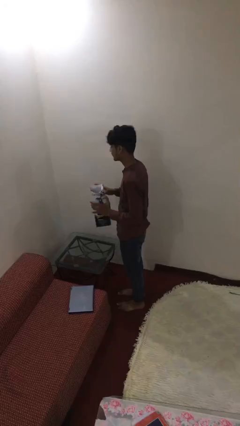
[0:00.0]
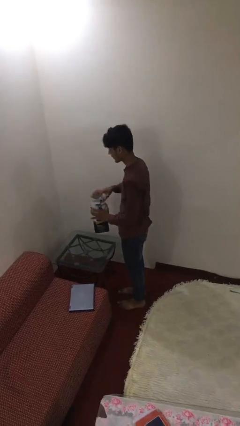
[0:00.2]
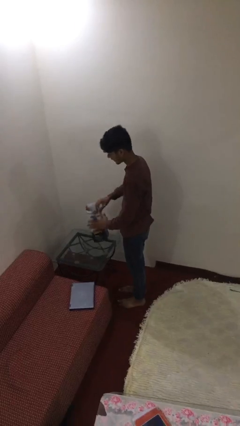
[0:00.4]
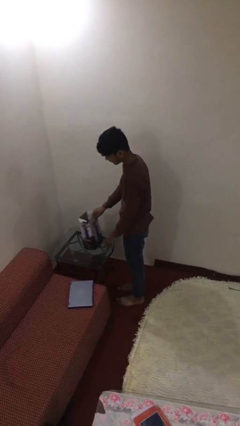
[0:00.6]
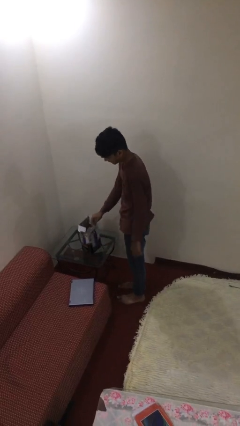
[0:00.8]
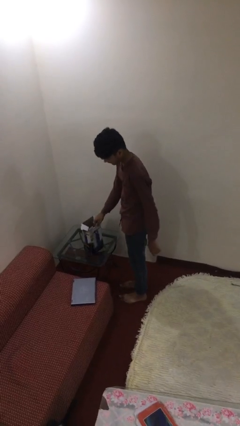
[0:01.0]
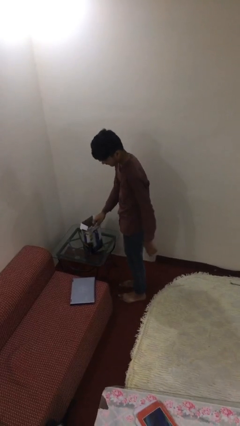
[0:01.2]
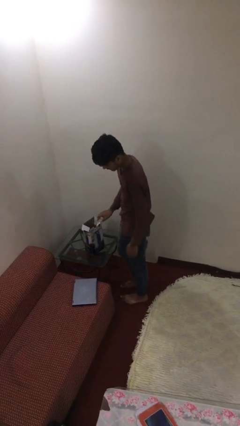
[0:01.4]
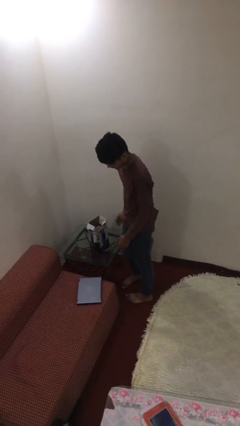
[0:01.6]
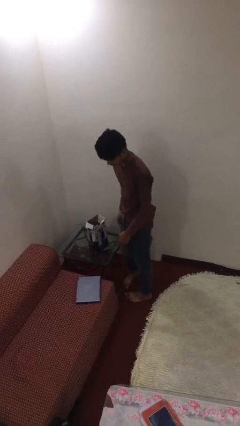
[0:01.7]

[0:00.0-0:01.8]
person puts down object on table

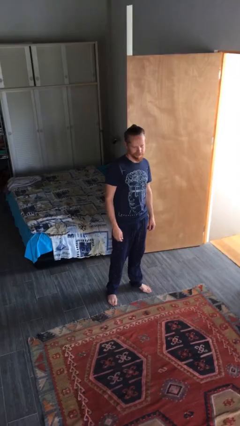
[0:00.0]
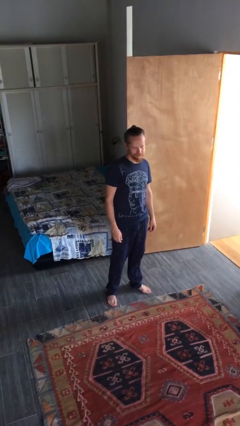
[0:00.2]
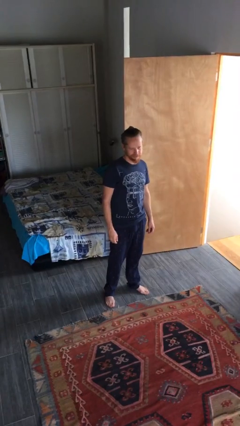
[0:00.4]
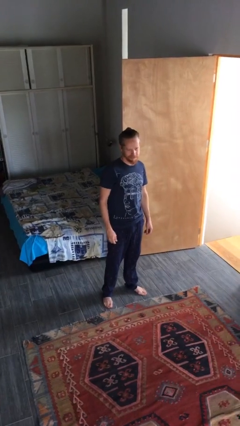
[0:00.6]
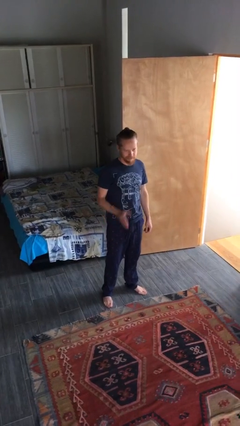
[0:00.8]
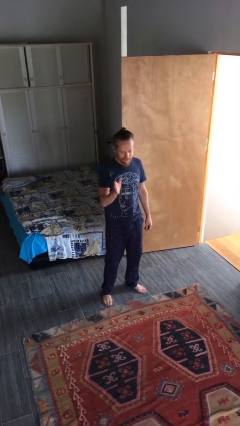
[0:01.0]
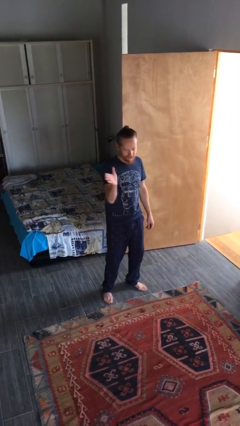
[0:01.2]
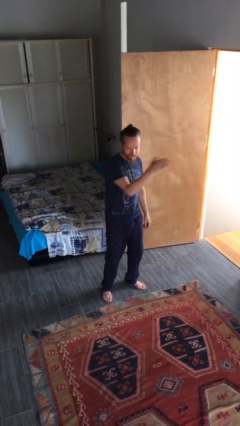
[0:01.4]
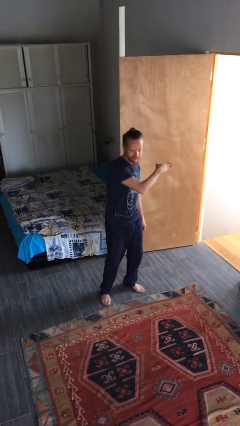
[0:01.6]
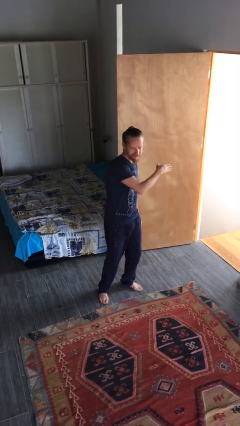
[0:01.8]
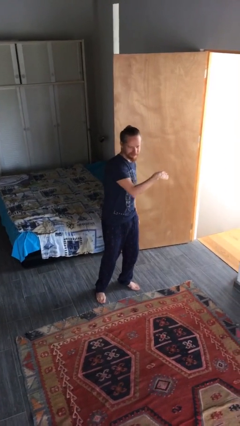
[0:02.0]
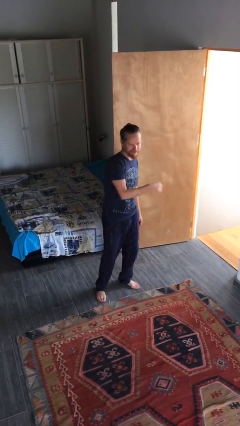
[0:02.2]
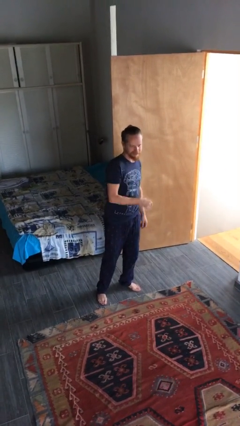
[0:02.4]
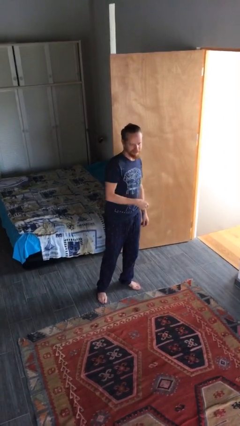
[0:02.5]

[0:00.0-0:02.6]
person gestures swipe left

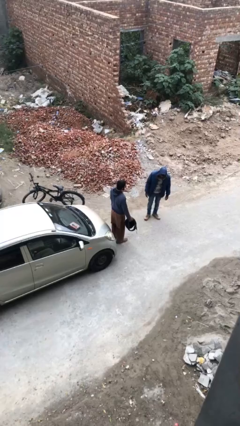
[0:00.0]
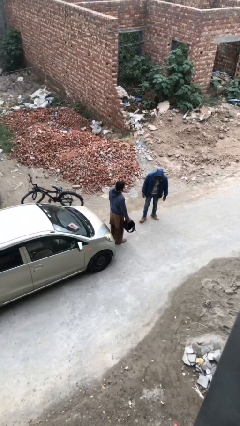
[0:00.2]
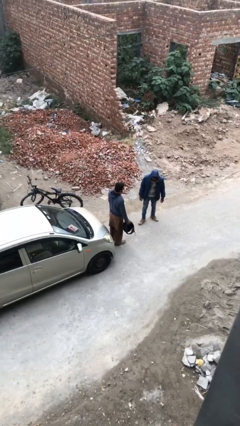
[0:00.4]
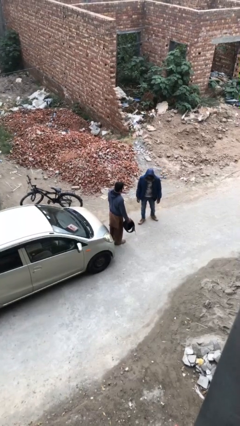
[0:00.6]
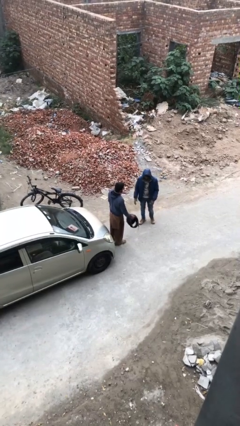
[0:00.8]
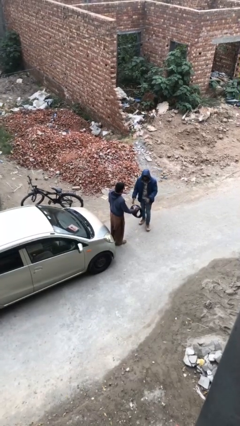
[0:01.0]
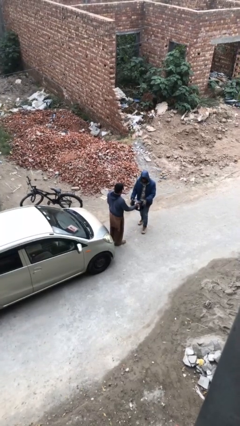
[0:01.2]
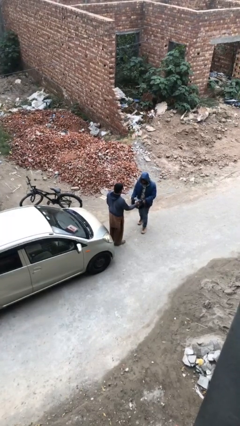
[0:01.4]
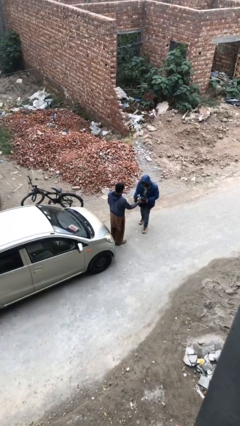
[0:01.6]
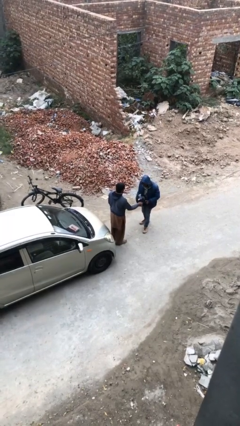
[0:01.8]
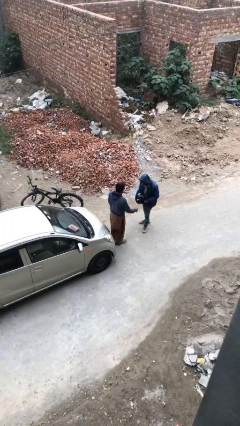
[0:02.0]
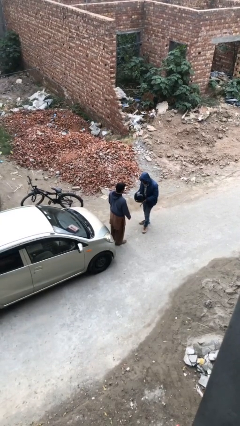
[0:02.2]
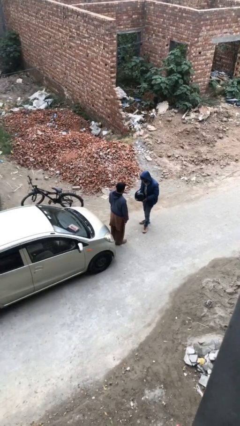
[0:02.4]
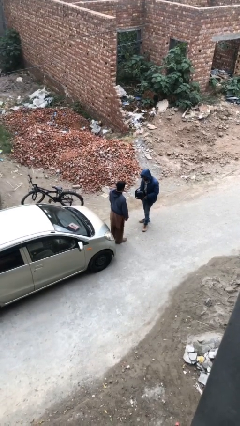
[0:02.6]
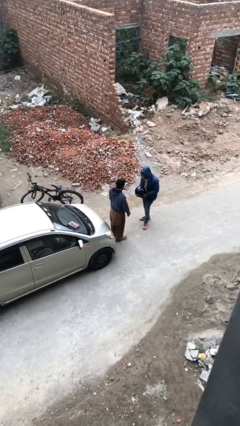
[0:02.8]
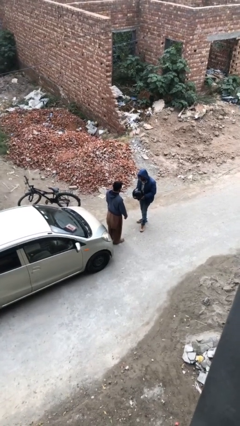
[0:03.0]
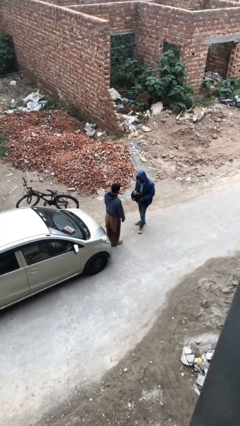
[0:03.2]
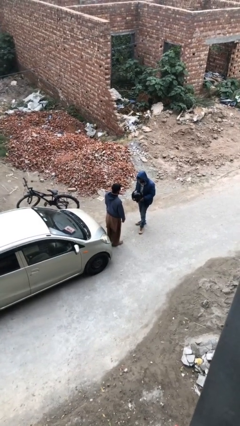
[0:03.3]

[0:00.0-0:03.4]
person transfers object to person

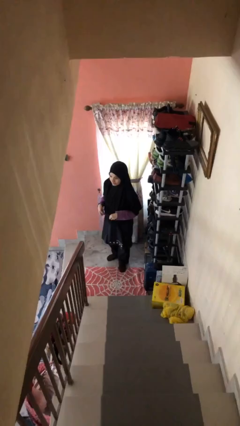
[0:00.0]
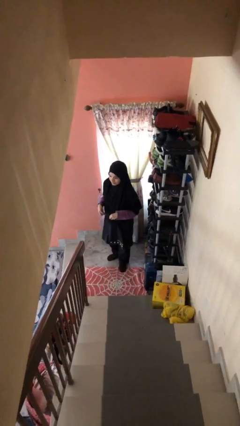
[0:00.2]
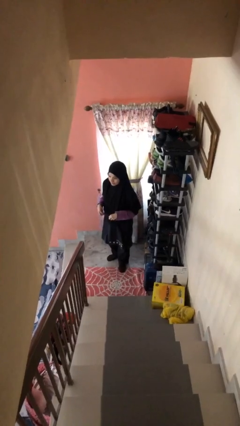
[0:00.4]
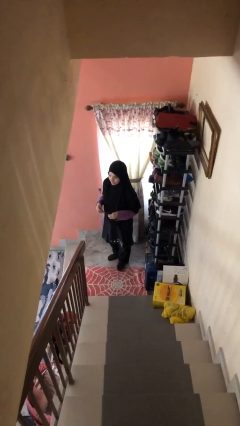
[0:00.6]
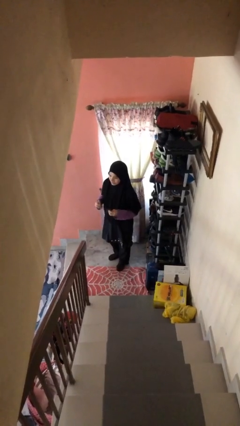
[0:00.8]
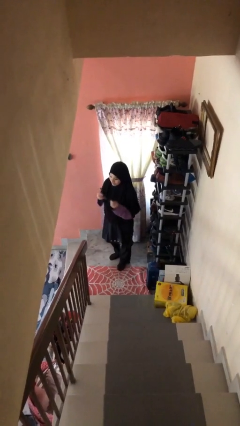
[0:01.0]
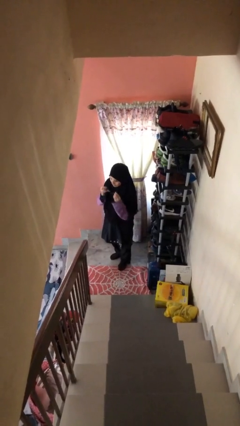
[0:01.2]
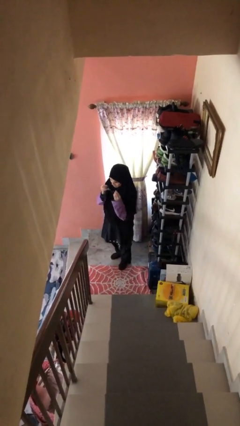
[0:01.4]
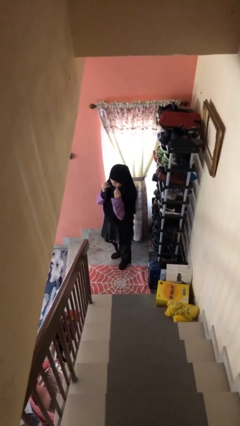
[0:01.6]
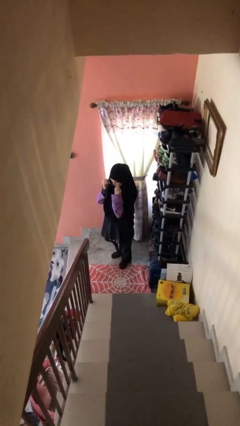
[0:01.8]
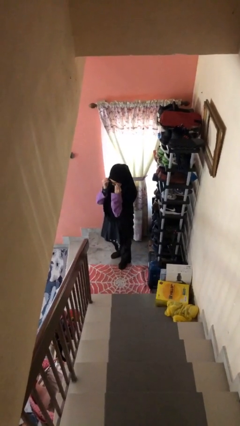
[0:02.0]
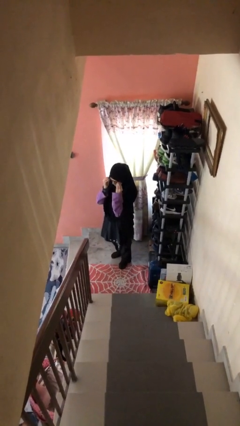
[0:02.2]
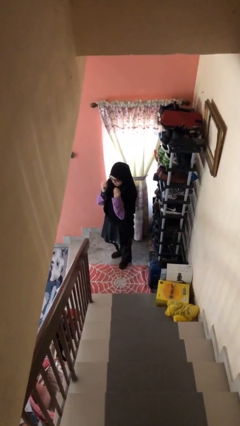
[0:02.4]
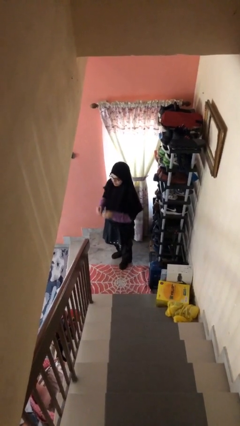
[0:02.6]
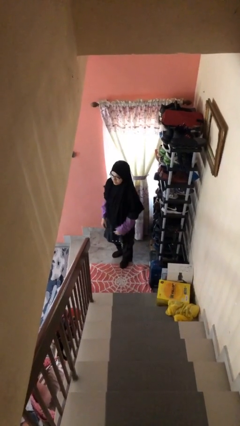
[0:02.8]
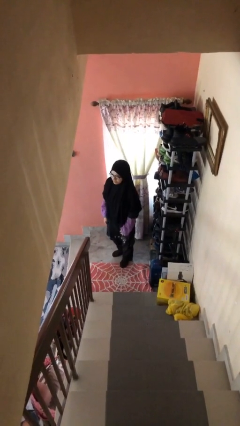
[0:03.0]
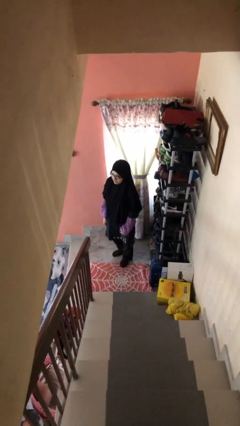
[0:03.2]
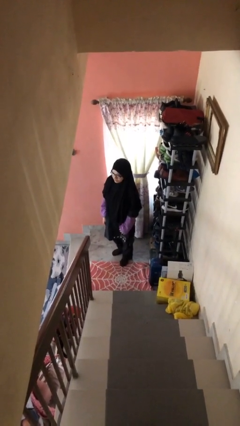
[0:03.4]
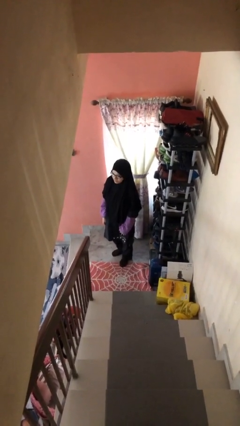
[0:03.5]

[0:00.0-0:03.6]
person puts on glasses

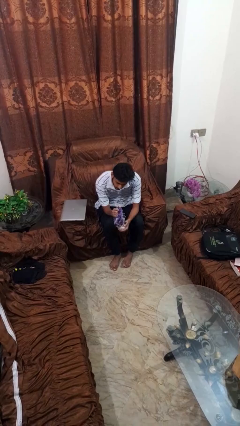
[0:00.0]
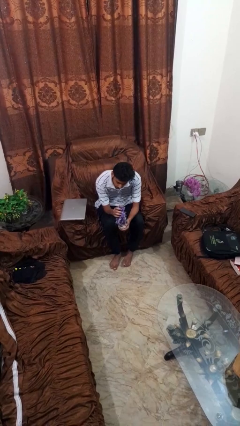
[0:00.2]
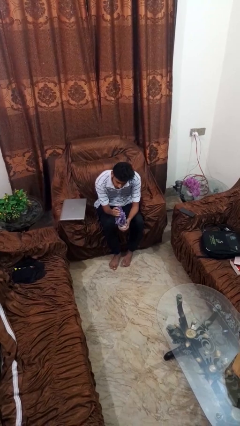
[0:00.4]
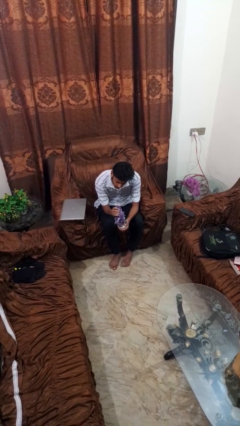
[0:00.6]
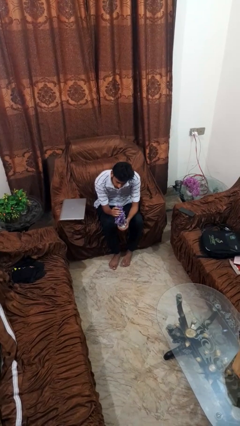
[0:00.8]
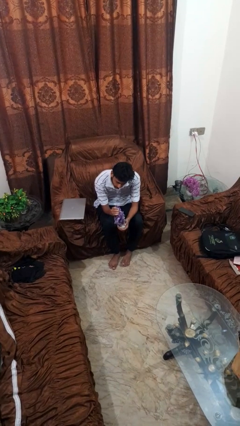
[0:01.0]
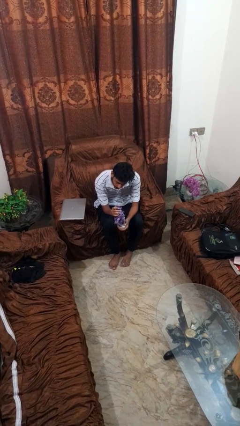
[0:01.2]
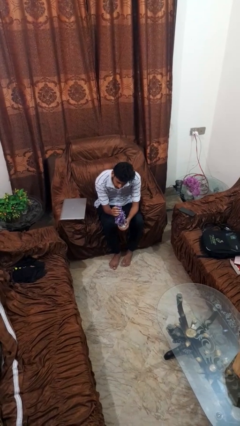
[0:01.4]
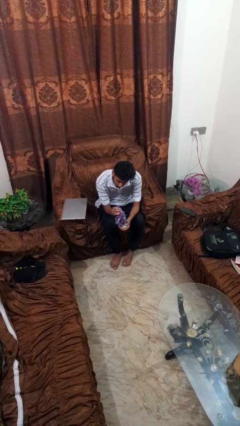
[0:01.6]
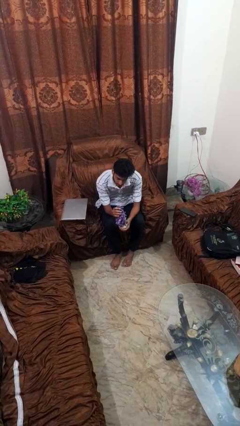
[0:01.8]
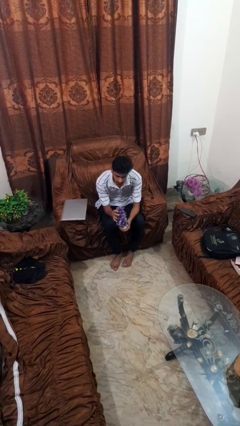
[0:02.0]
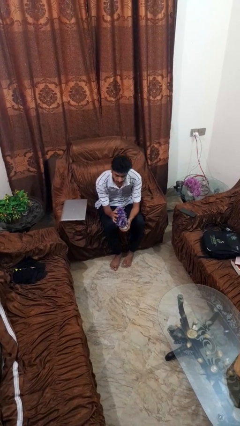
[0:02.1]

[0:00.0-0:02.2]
person squeezes object

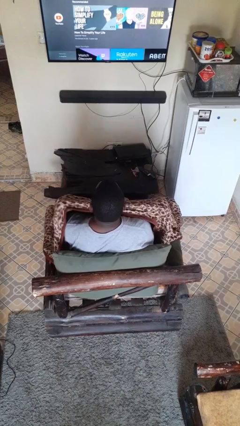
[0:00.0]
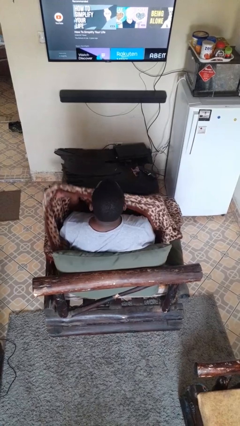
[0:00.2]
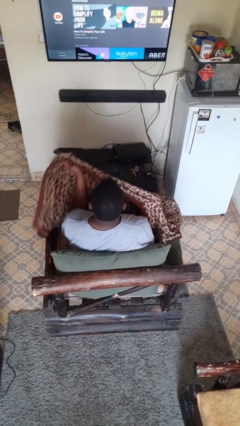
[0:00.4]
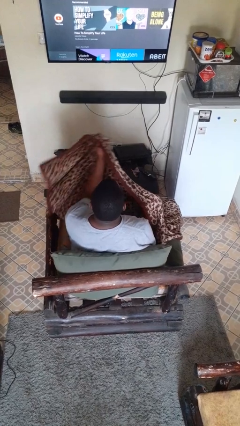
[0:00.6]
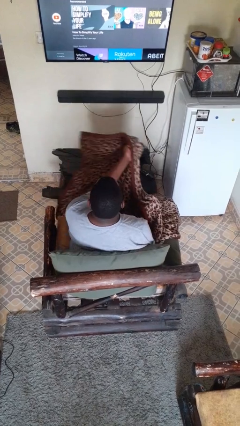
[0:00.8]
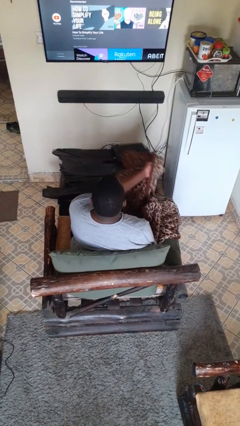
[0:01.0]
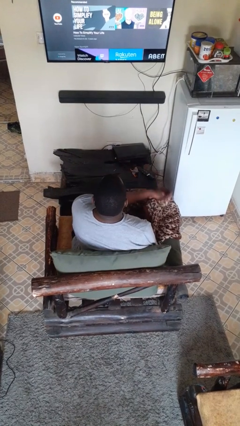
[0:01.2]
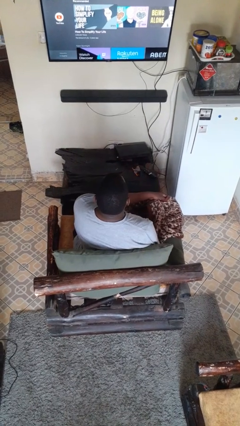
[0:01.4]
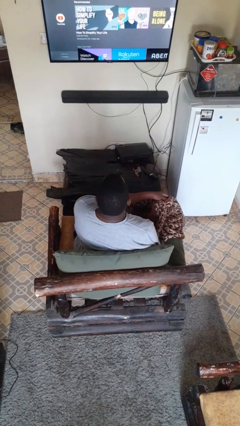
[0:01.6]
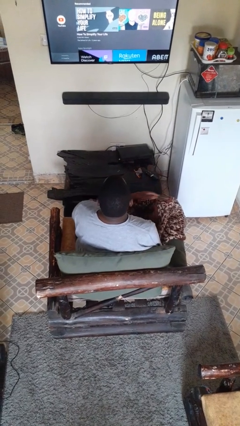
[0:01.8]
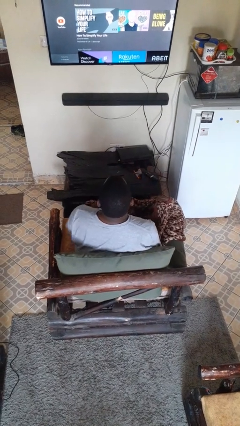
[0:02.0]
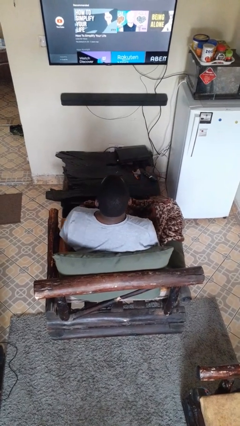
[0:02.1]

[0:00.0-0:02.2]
person uncovers with blanket

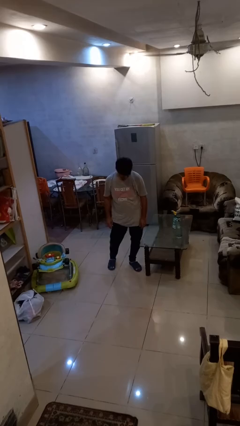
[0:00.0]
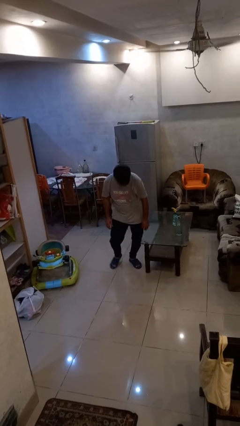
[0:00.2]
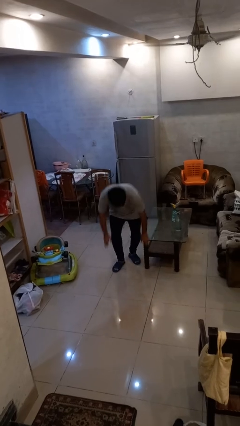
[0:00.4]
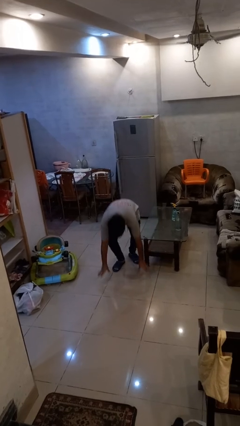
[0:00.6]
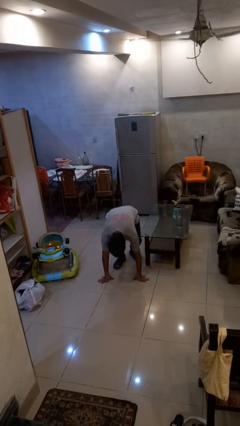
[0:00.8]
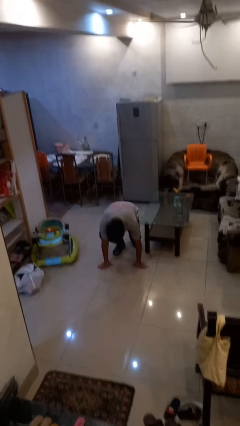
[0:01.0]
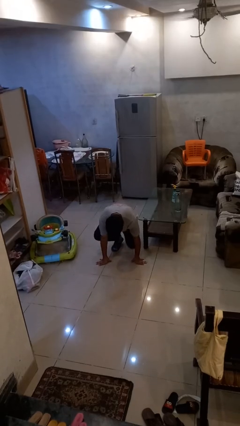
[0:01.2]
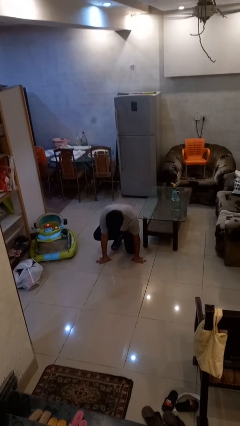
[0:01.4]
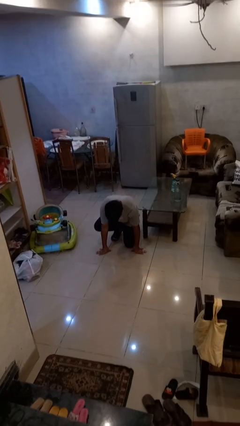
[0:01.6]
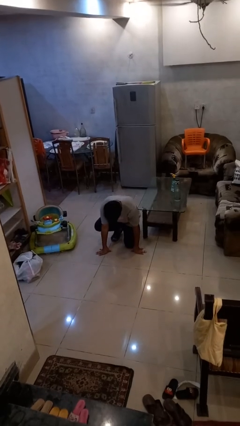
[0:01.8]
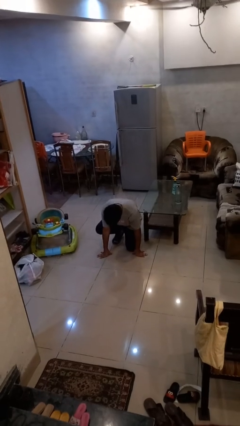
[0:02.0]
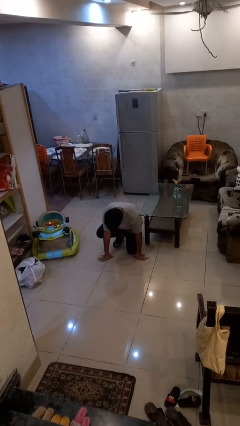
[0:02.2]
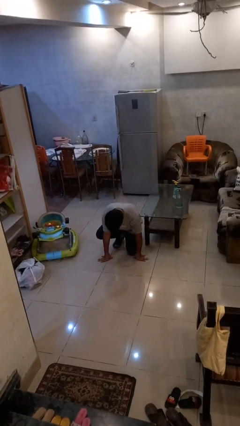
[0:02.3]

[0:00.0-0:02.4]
person trips on object on floor
